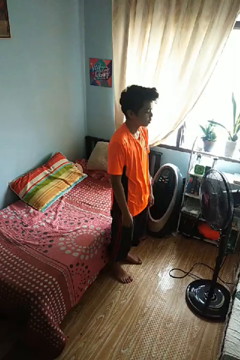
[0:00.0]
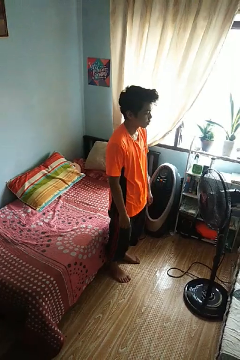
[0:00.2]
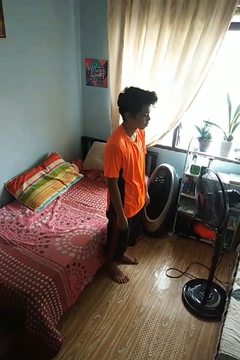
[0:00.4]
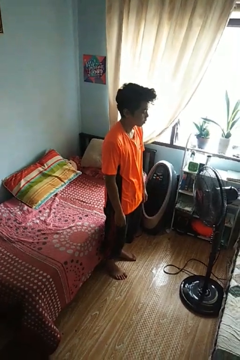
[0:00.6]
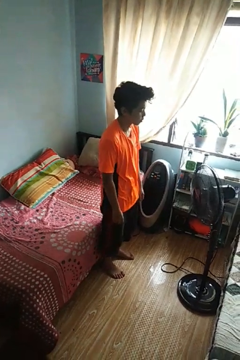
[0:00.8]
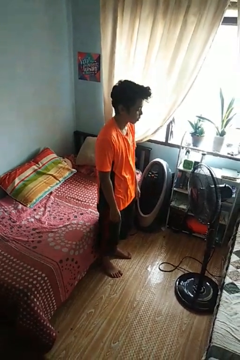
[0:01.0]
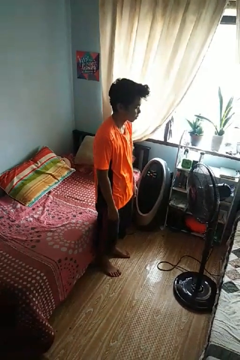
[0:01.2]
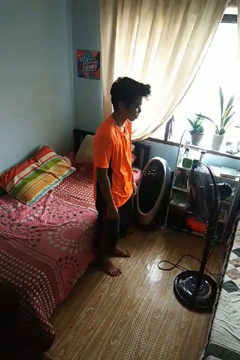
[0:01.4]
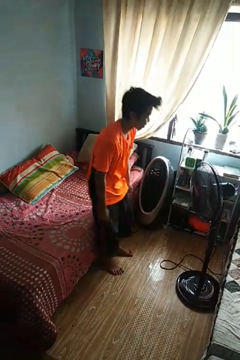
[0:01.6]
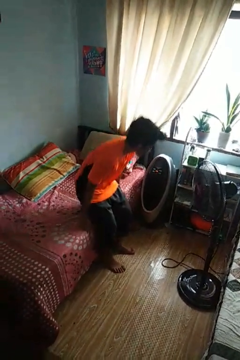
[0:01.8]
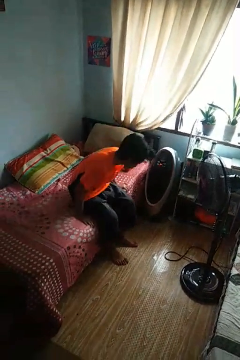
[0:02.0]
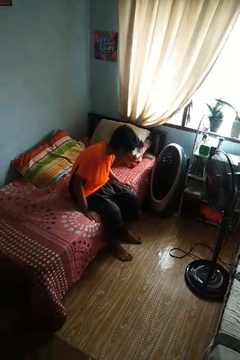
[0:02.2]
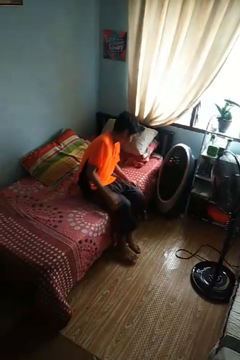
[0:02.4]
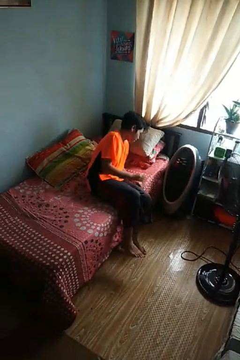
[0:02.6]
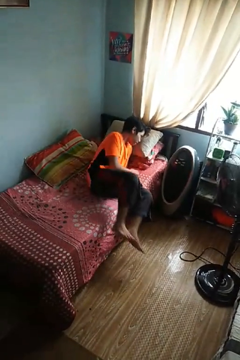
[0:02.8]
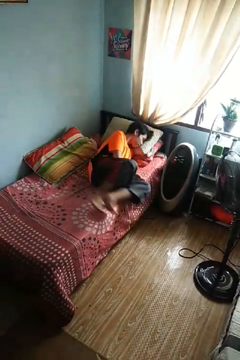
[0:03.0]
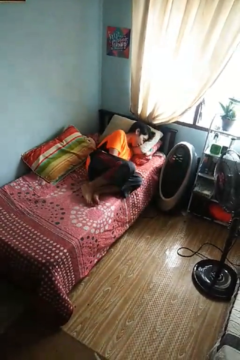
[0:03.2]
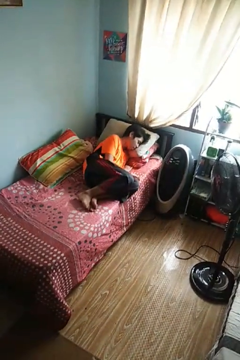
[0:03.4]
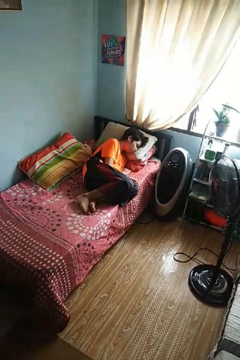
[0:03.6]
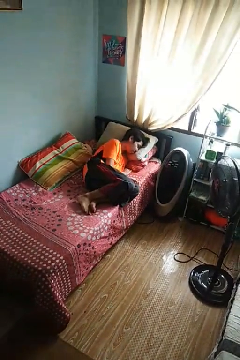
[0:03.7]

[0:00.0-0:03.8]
person lies down on bed

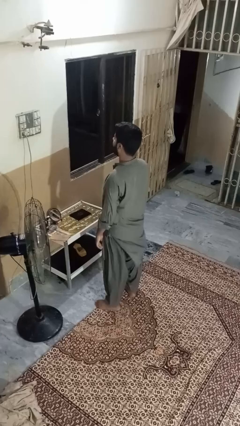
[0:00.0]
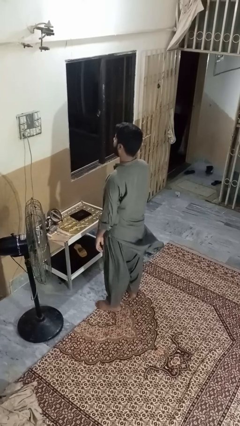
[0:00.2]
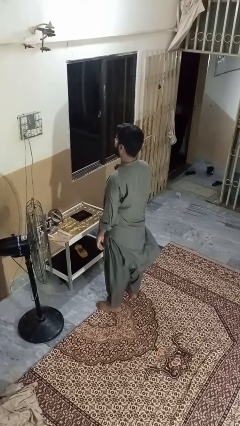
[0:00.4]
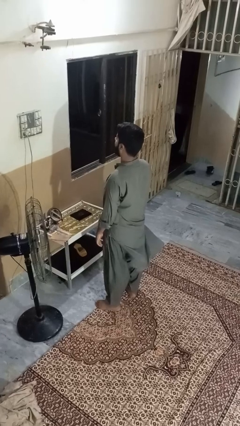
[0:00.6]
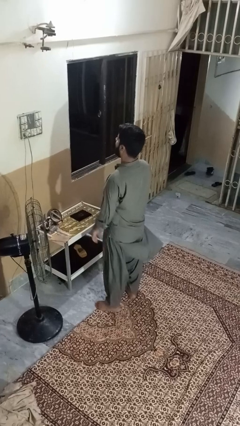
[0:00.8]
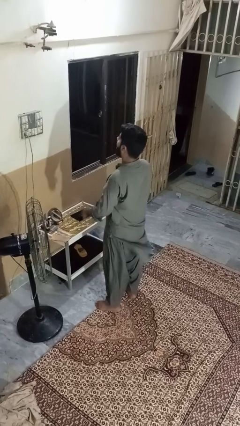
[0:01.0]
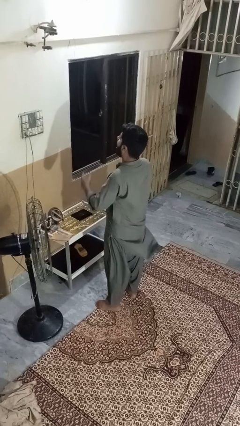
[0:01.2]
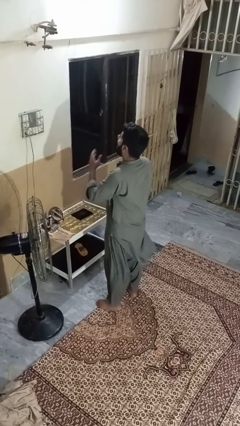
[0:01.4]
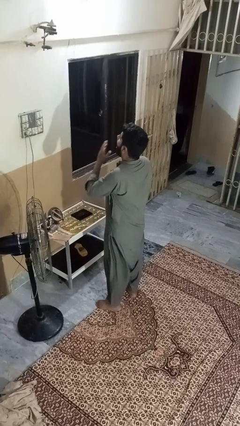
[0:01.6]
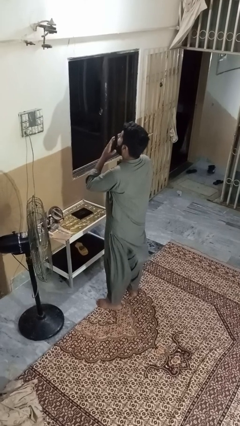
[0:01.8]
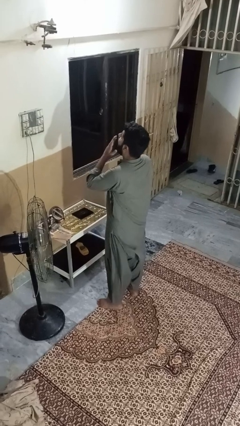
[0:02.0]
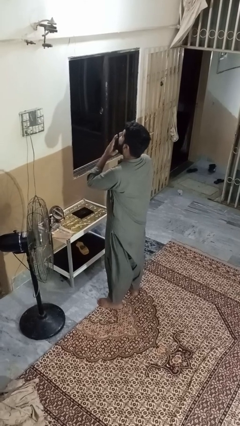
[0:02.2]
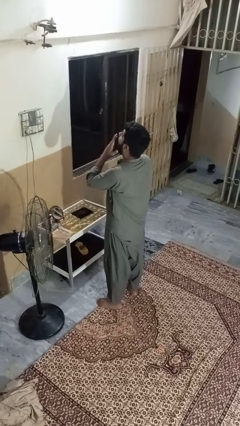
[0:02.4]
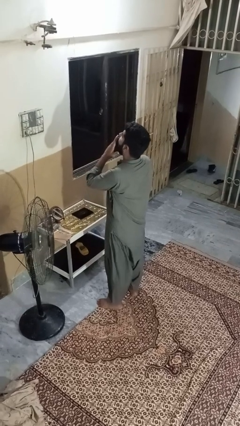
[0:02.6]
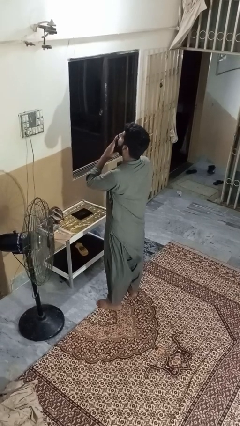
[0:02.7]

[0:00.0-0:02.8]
person yawns

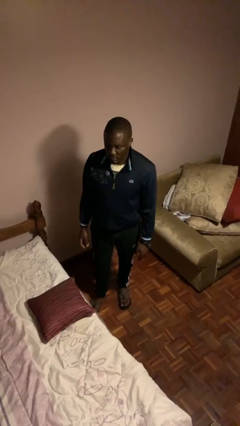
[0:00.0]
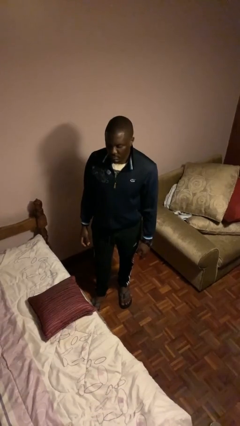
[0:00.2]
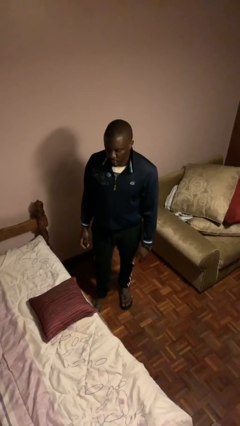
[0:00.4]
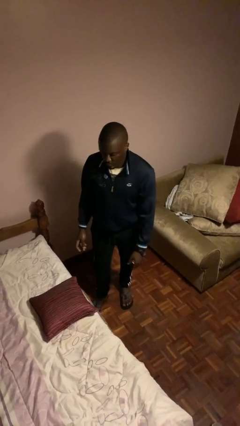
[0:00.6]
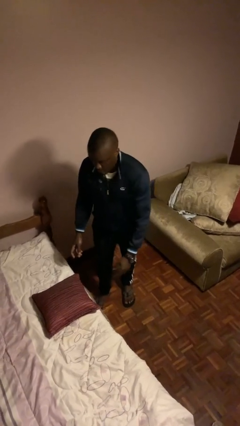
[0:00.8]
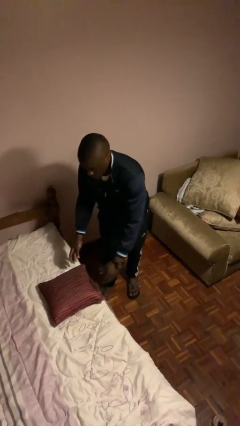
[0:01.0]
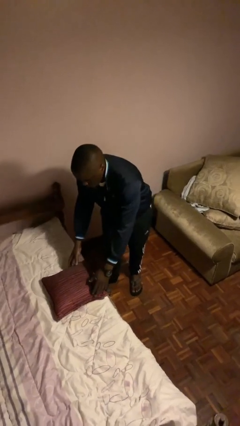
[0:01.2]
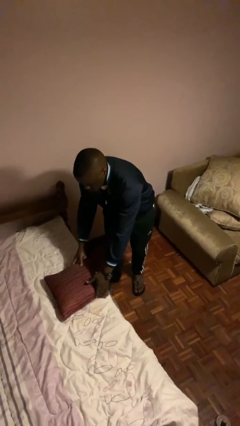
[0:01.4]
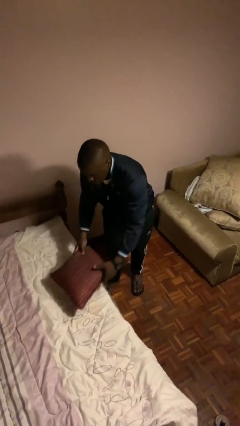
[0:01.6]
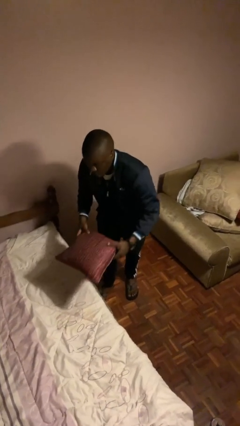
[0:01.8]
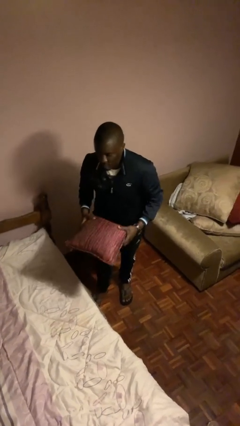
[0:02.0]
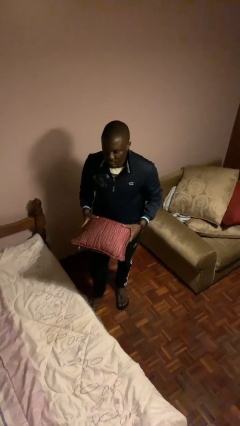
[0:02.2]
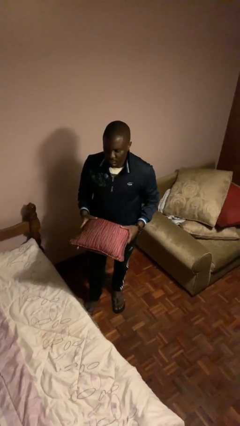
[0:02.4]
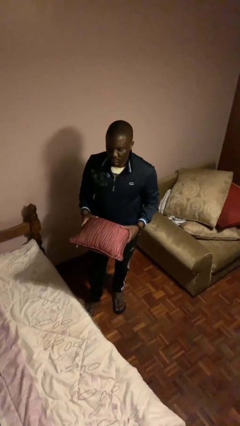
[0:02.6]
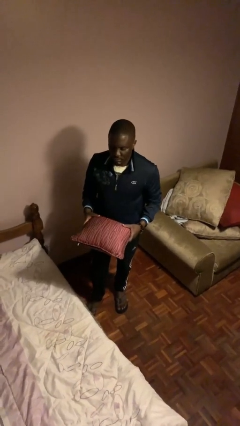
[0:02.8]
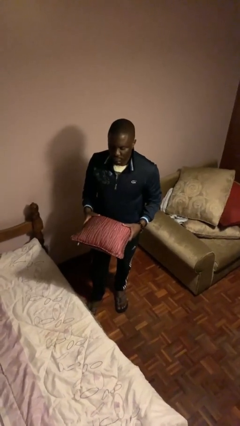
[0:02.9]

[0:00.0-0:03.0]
person picks up object from bed

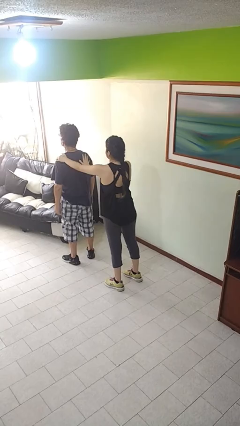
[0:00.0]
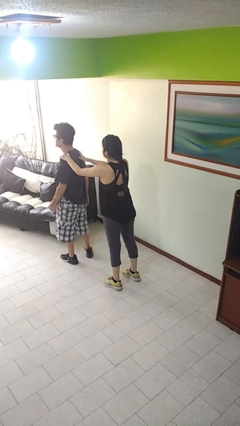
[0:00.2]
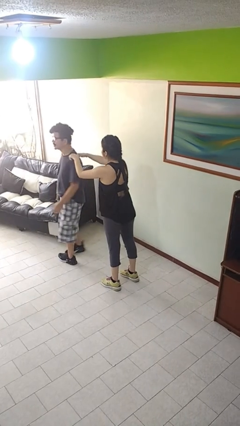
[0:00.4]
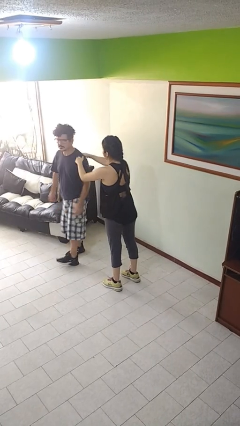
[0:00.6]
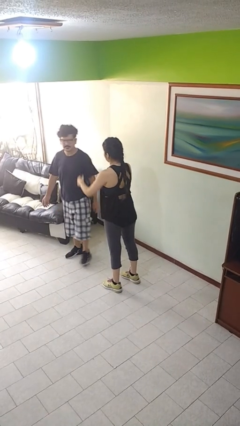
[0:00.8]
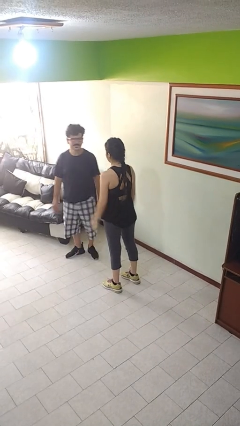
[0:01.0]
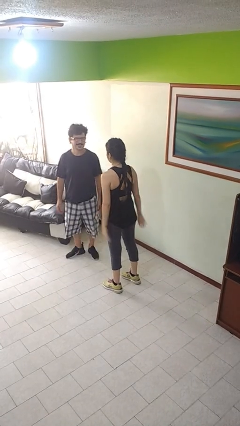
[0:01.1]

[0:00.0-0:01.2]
person spins person around

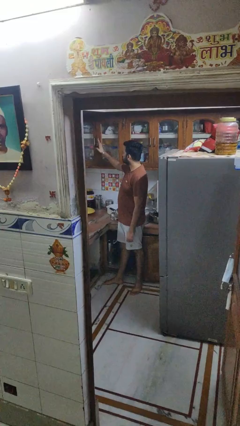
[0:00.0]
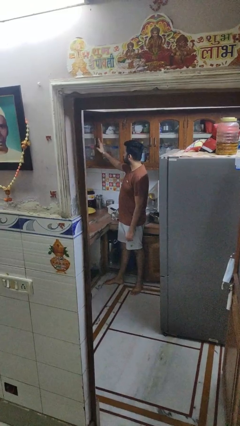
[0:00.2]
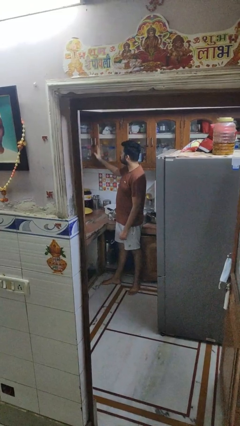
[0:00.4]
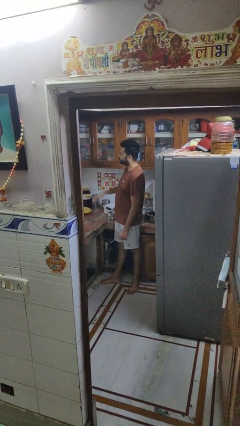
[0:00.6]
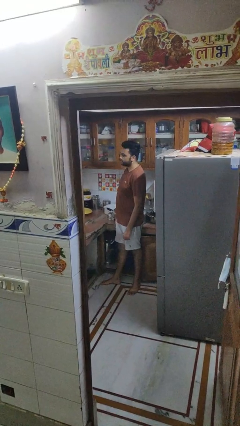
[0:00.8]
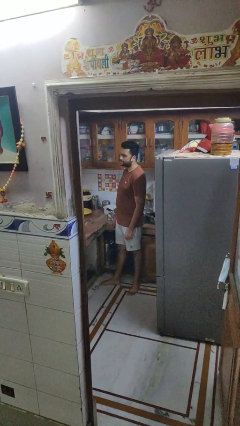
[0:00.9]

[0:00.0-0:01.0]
person closes cabinet

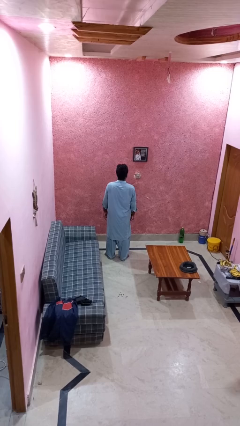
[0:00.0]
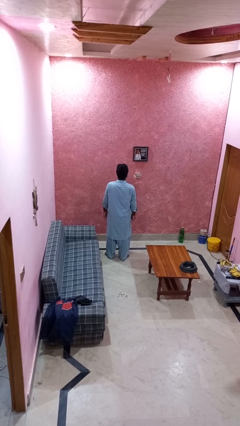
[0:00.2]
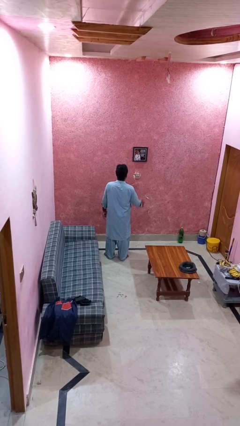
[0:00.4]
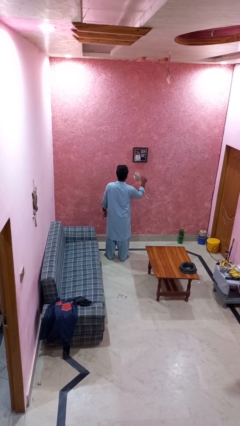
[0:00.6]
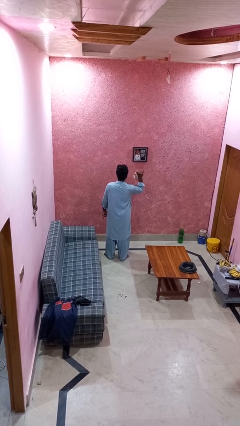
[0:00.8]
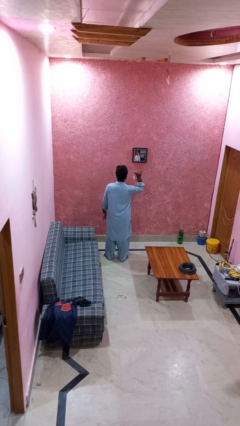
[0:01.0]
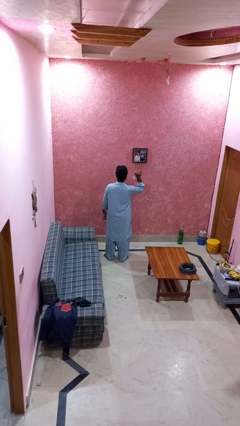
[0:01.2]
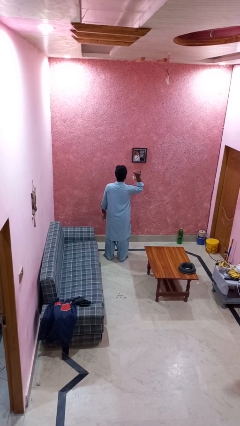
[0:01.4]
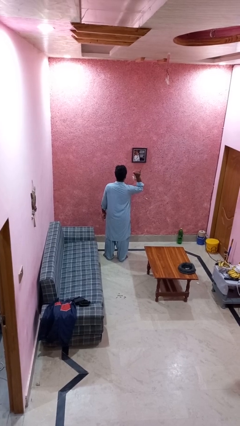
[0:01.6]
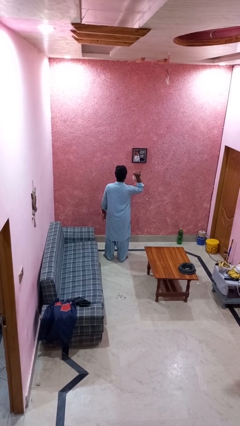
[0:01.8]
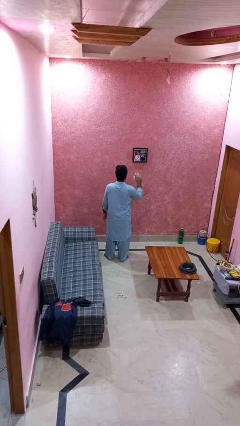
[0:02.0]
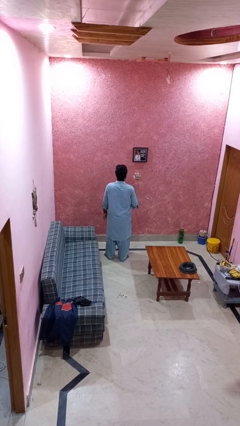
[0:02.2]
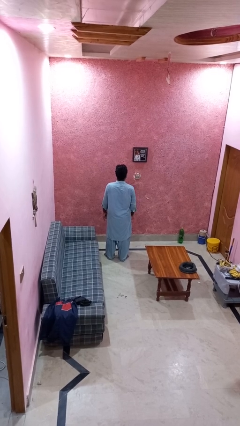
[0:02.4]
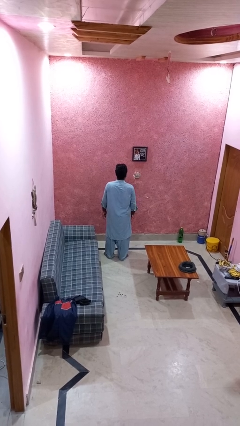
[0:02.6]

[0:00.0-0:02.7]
person gestures hang loose

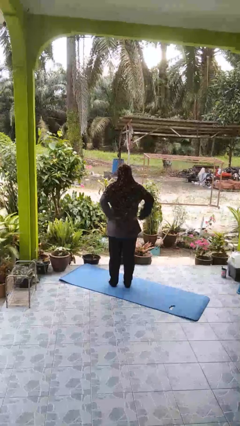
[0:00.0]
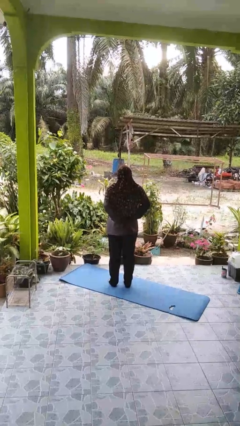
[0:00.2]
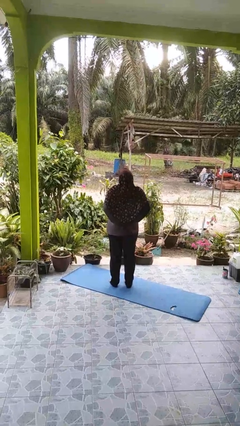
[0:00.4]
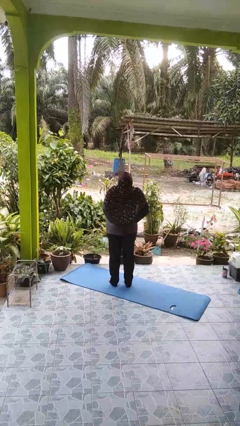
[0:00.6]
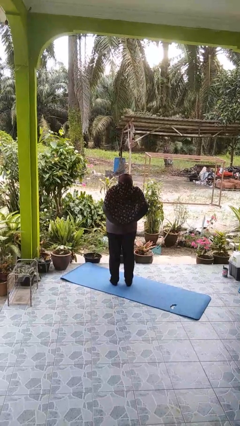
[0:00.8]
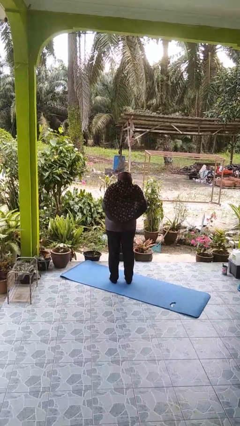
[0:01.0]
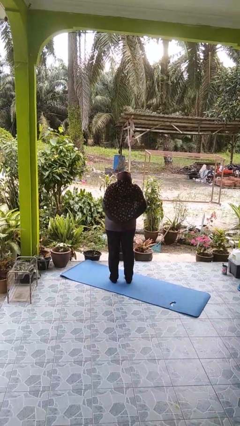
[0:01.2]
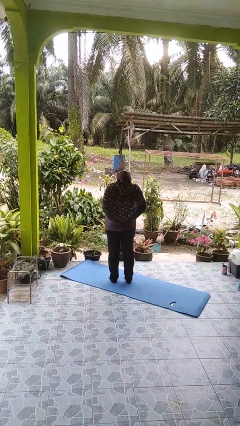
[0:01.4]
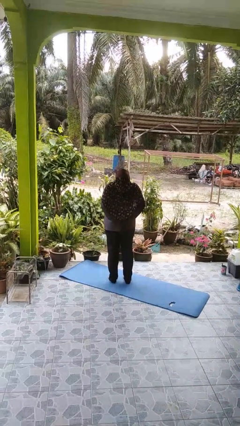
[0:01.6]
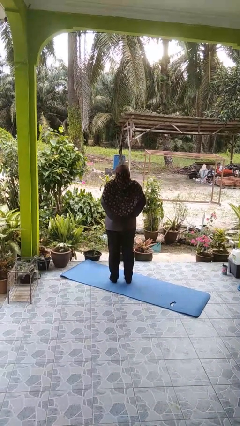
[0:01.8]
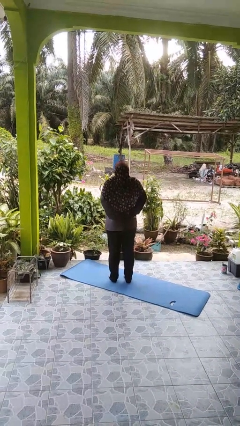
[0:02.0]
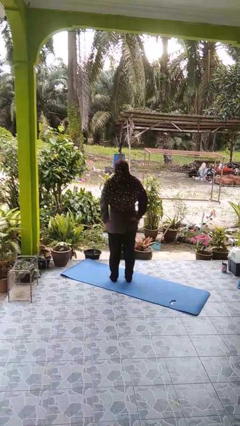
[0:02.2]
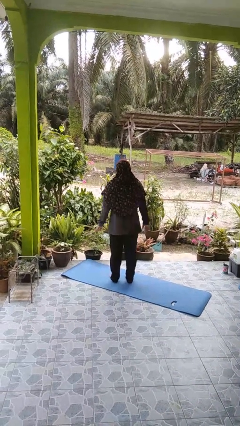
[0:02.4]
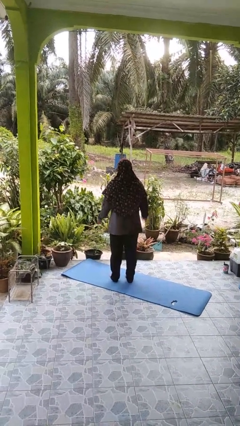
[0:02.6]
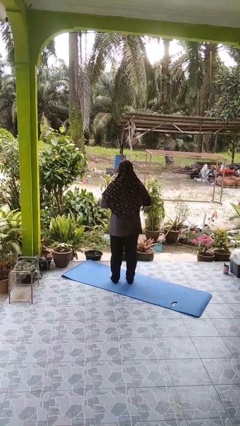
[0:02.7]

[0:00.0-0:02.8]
person stretches back

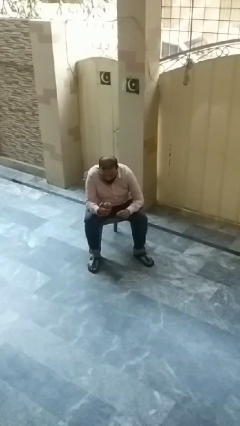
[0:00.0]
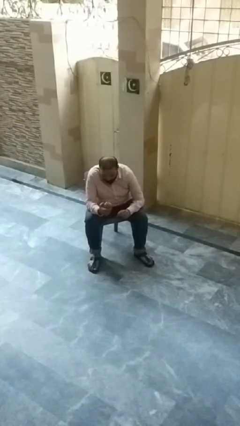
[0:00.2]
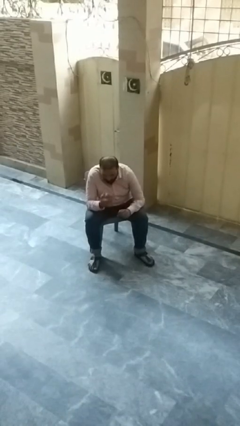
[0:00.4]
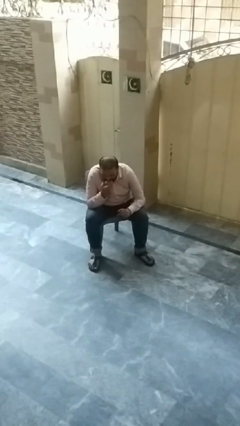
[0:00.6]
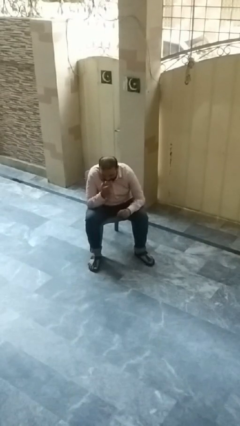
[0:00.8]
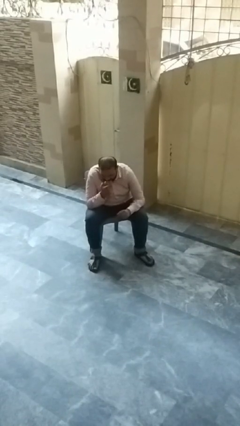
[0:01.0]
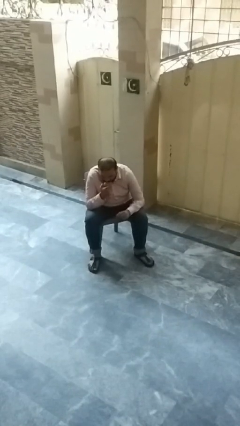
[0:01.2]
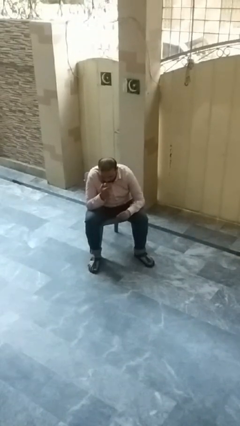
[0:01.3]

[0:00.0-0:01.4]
person eats apple
